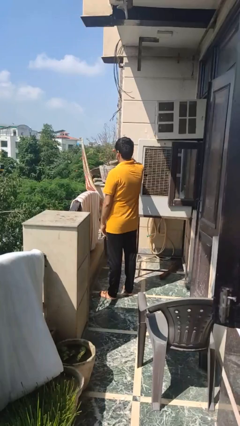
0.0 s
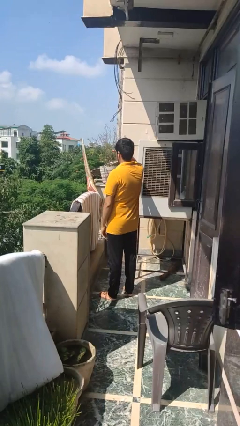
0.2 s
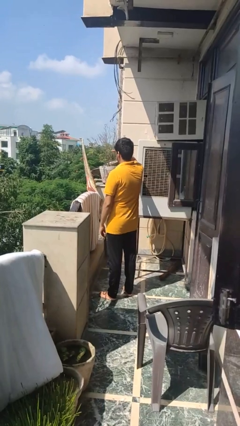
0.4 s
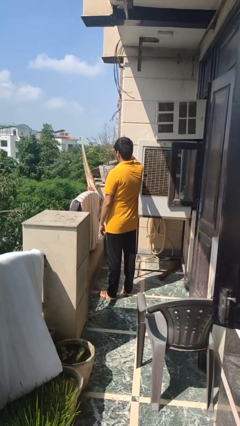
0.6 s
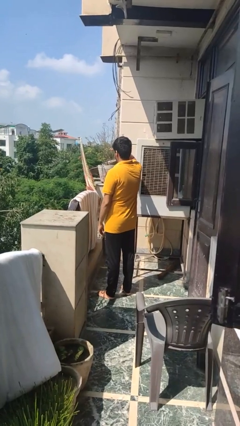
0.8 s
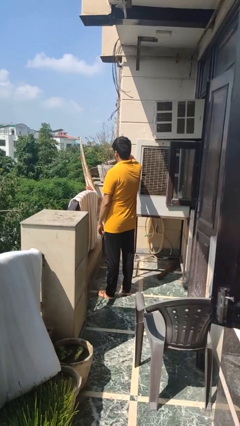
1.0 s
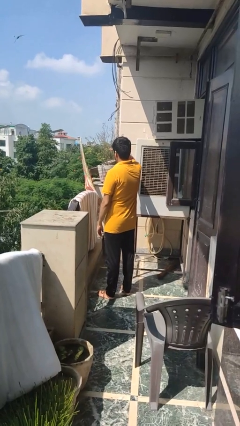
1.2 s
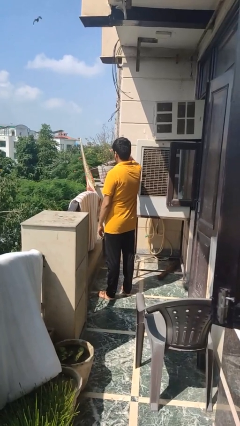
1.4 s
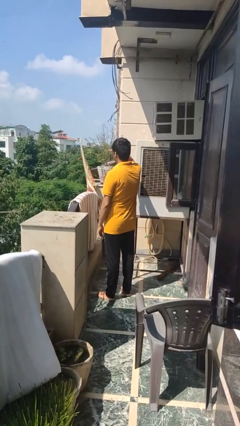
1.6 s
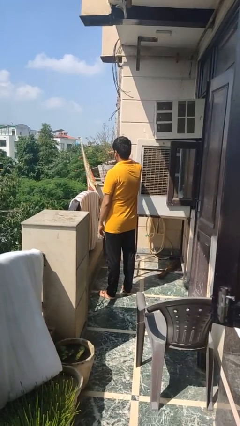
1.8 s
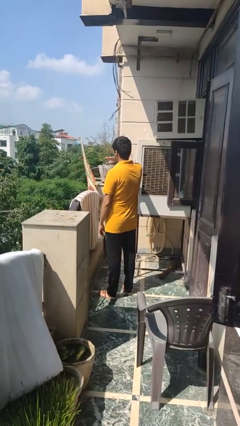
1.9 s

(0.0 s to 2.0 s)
person shades eyes

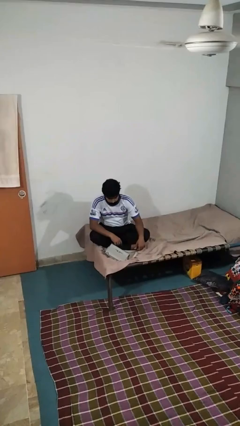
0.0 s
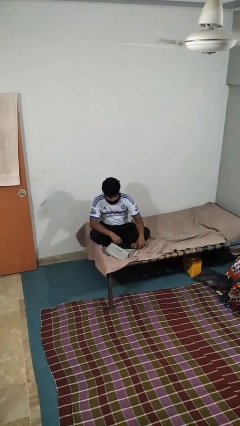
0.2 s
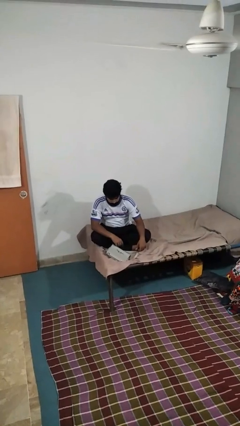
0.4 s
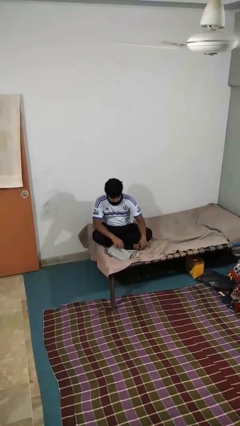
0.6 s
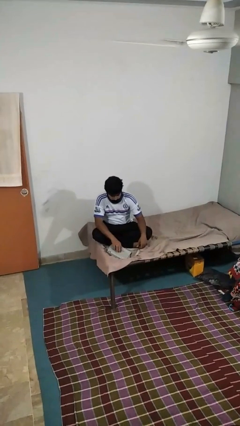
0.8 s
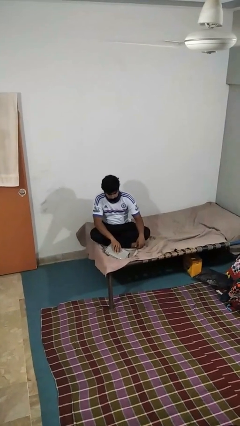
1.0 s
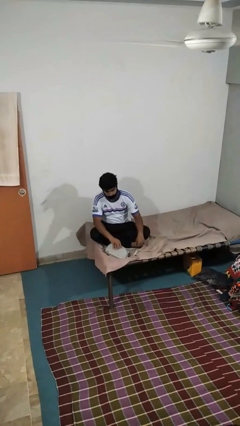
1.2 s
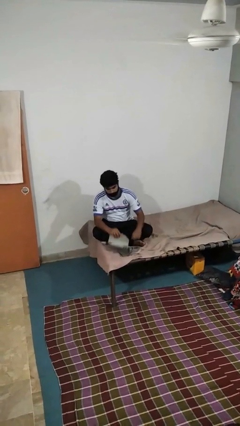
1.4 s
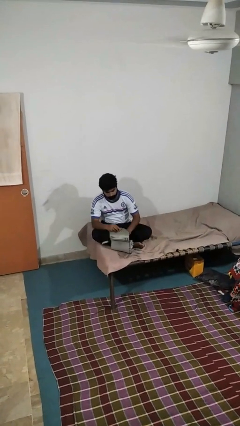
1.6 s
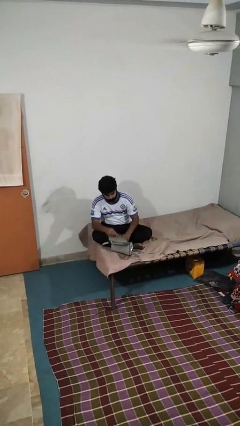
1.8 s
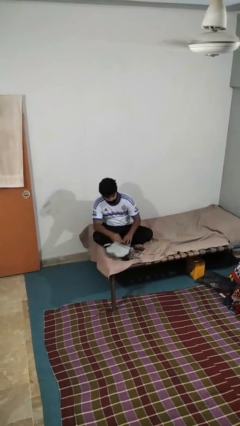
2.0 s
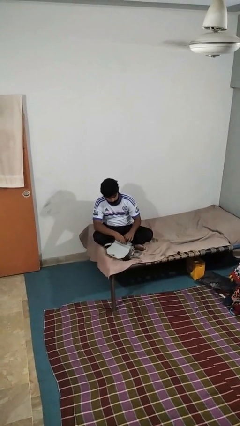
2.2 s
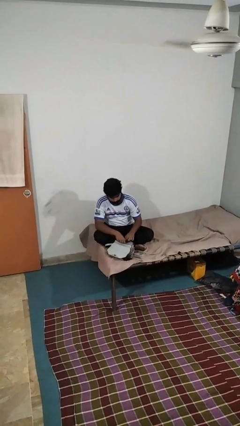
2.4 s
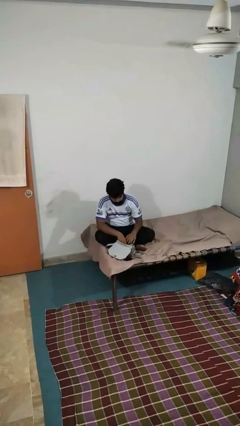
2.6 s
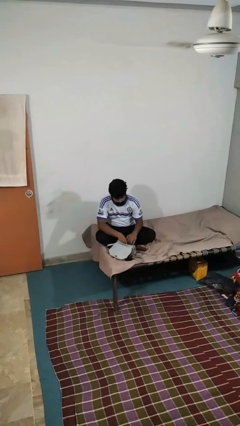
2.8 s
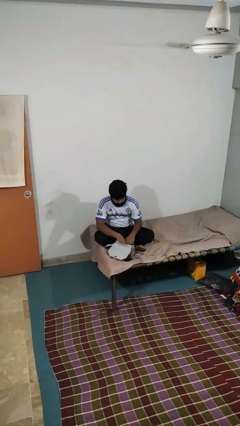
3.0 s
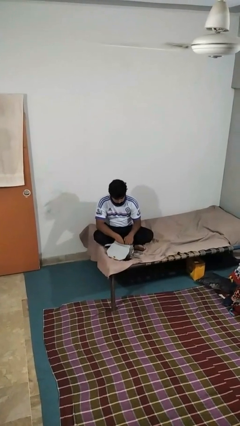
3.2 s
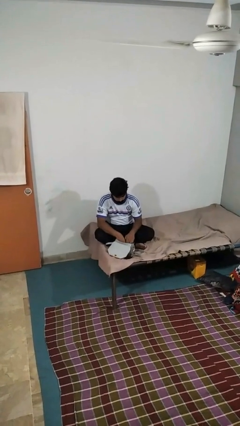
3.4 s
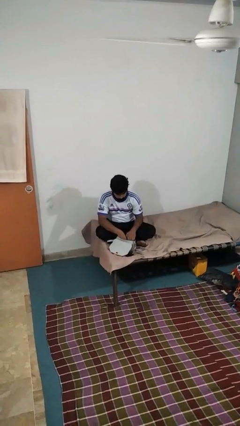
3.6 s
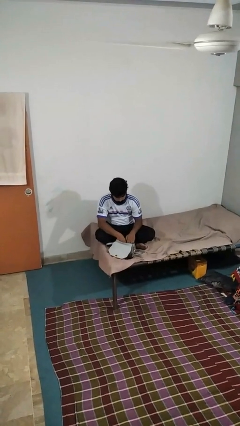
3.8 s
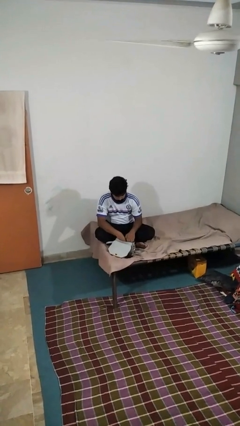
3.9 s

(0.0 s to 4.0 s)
person searches in purse

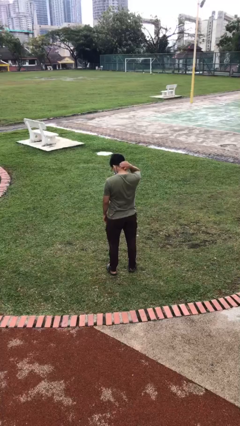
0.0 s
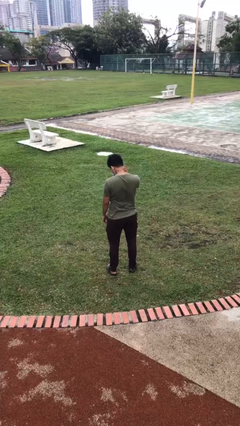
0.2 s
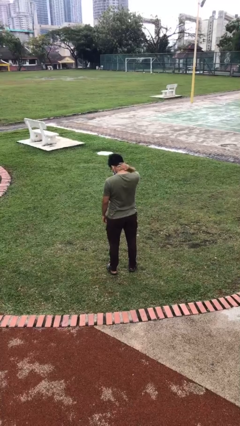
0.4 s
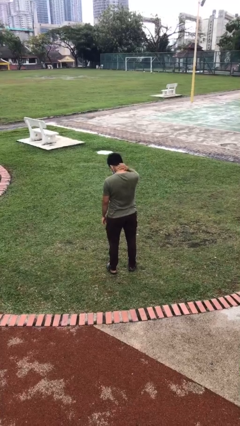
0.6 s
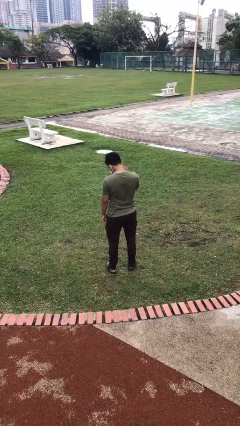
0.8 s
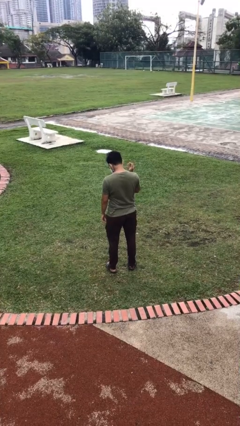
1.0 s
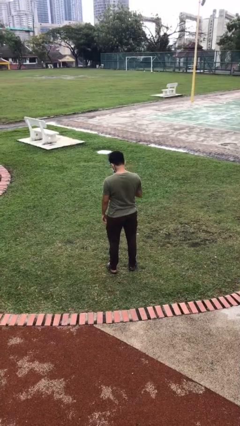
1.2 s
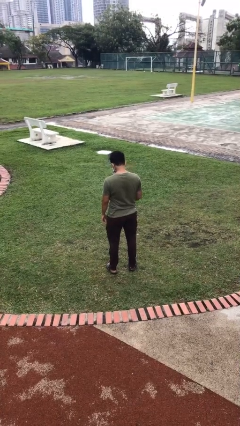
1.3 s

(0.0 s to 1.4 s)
person rubs neck

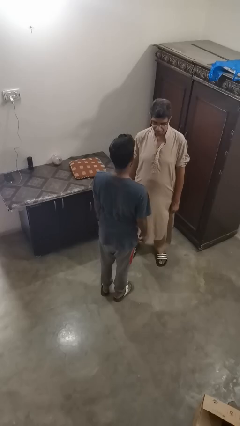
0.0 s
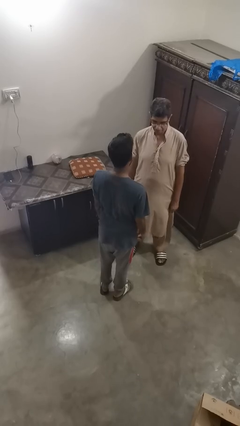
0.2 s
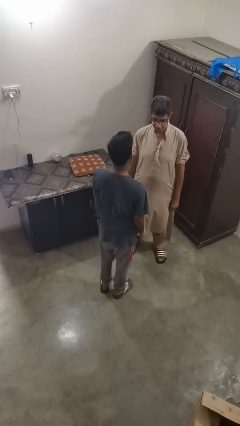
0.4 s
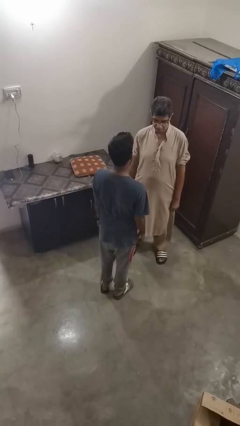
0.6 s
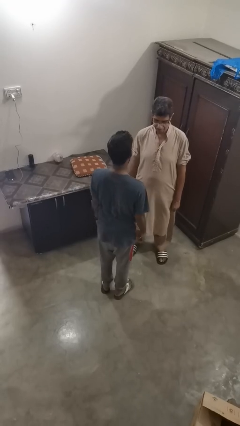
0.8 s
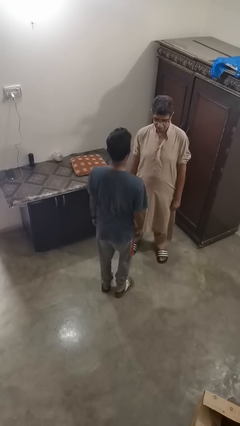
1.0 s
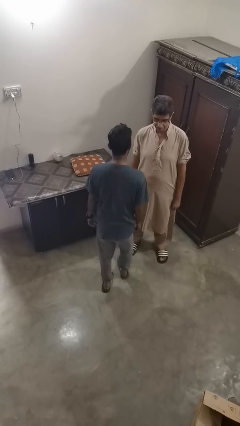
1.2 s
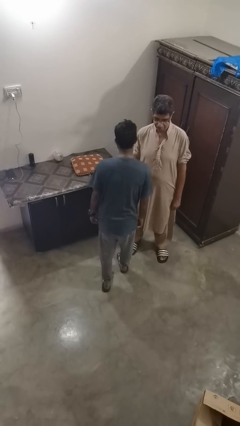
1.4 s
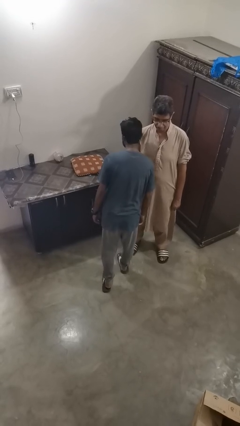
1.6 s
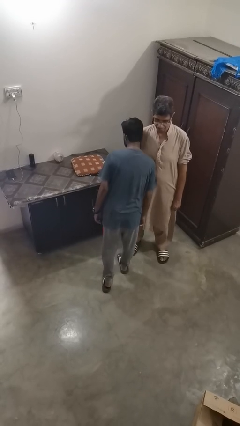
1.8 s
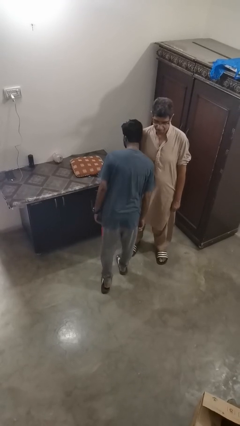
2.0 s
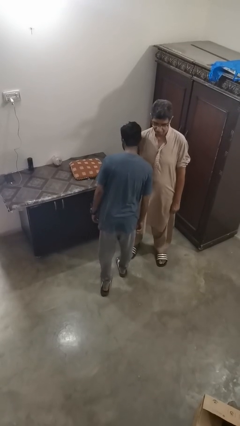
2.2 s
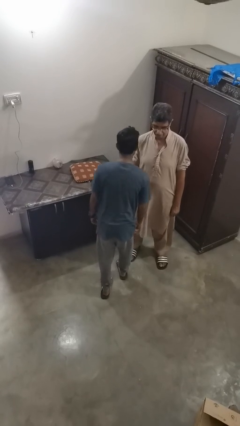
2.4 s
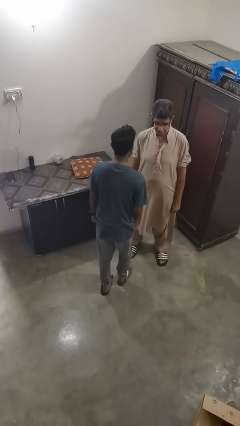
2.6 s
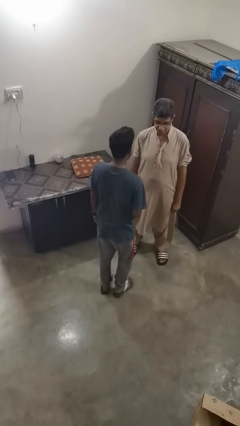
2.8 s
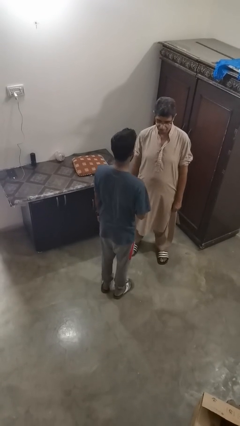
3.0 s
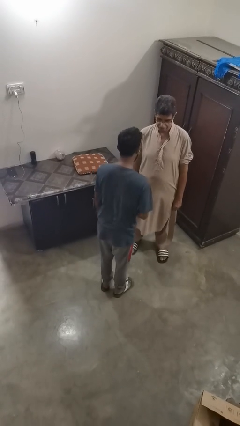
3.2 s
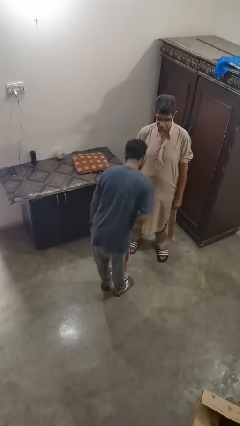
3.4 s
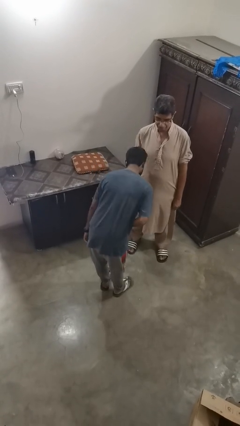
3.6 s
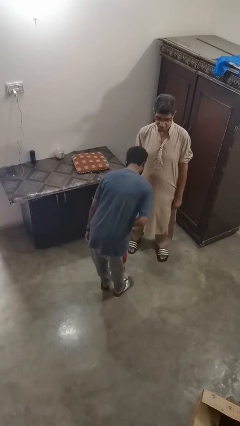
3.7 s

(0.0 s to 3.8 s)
person bumps into person

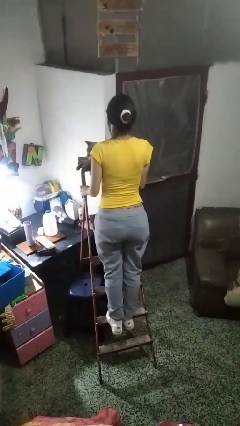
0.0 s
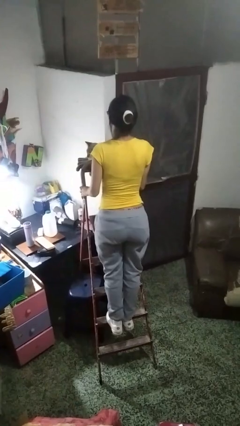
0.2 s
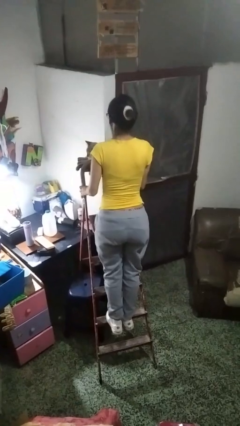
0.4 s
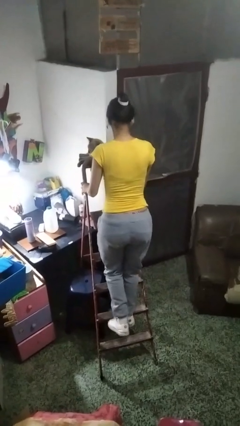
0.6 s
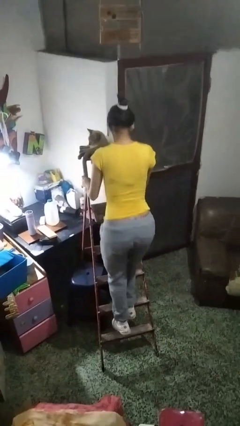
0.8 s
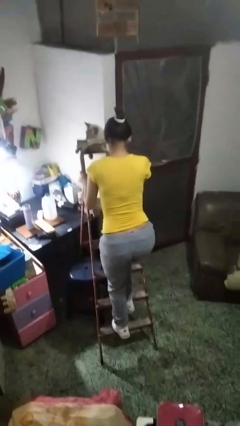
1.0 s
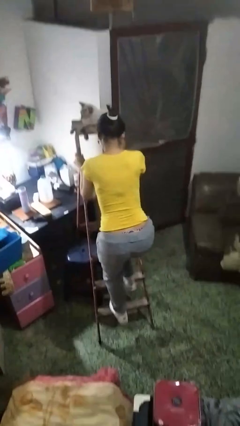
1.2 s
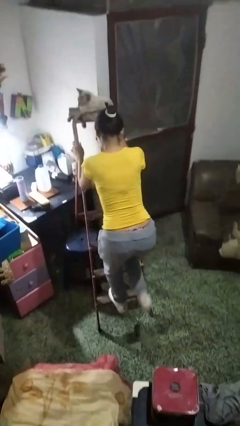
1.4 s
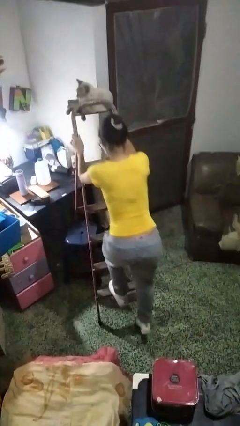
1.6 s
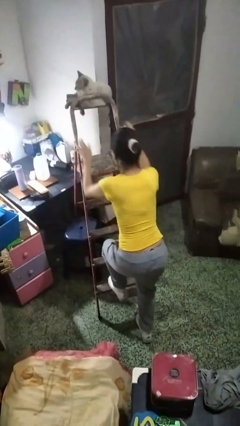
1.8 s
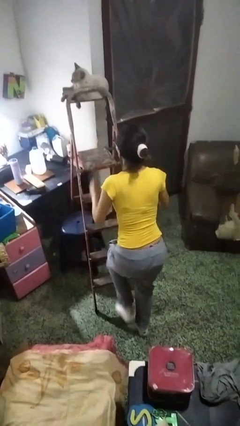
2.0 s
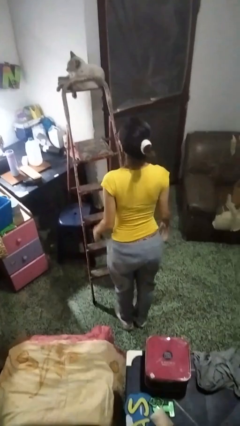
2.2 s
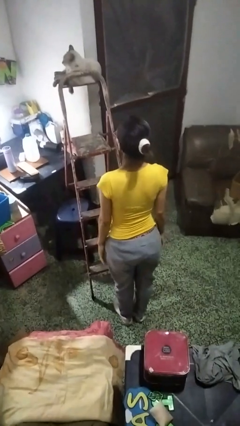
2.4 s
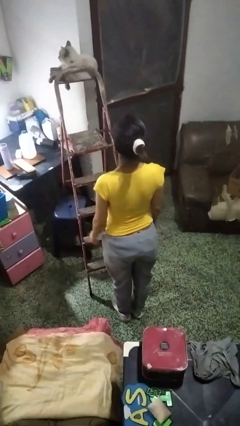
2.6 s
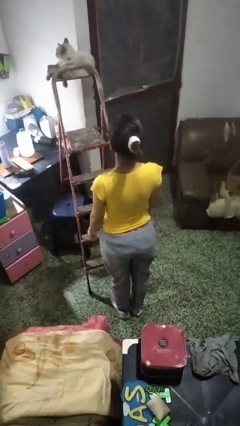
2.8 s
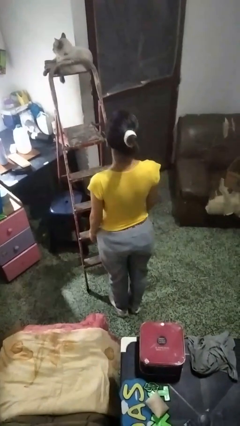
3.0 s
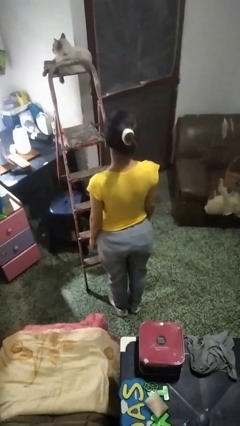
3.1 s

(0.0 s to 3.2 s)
person climbs down ladder

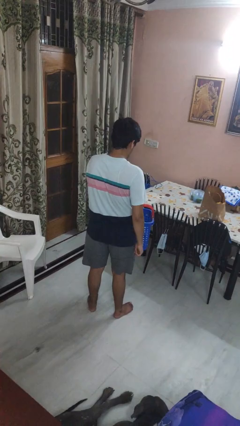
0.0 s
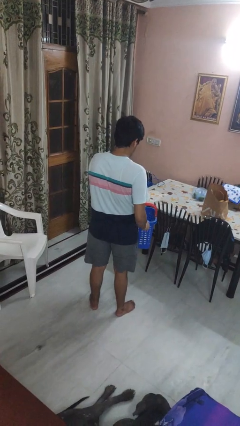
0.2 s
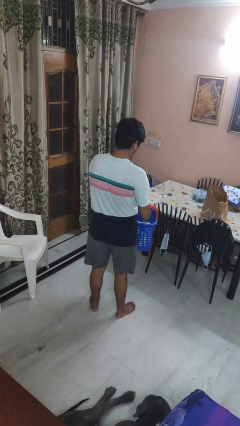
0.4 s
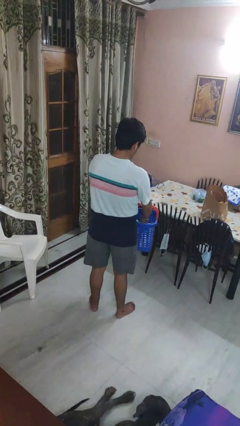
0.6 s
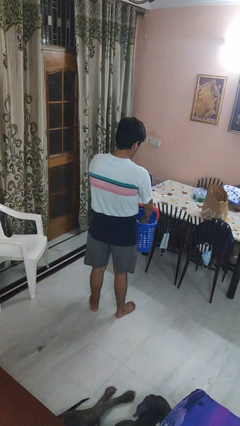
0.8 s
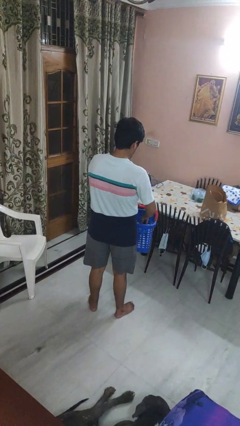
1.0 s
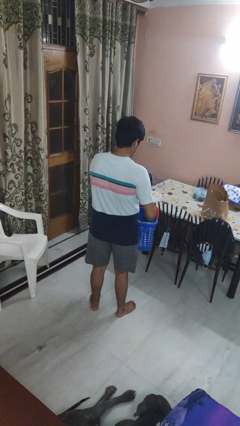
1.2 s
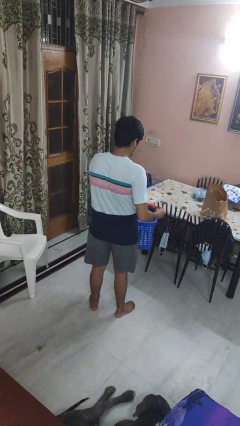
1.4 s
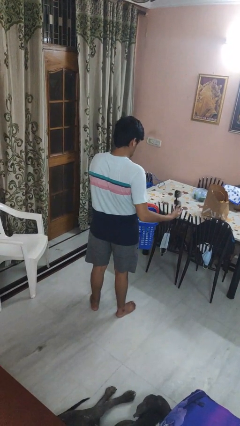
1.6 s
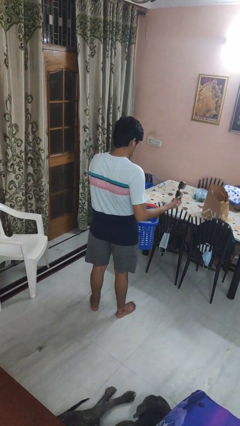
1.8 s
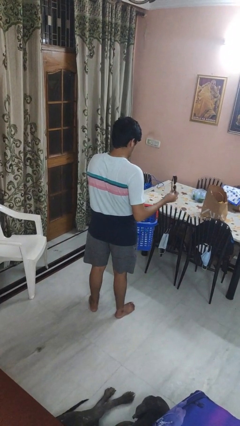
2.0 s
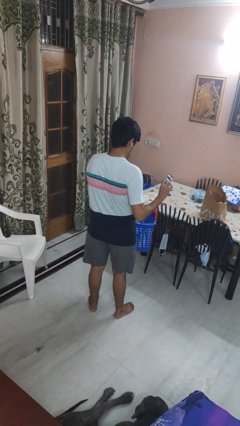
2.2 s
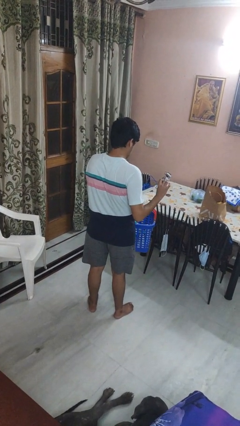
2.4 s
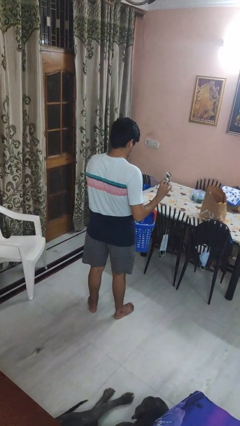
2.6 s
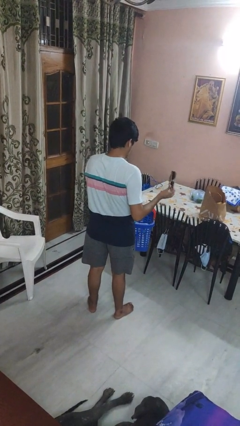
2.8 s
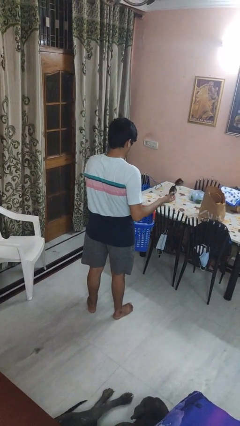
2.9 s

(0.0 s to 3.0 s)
person takes object from basket
